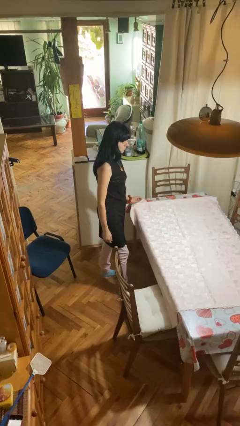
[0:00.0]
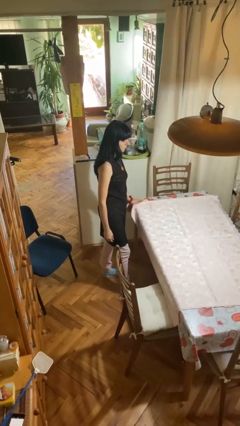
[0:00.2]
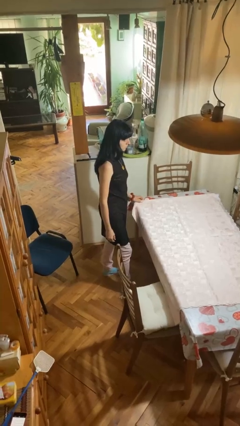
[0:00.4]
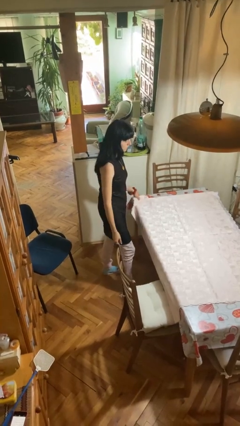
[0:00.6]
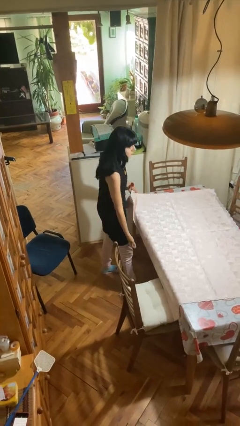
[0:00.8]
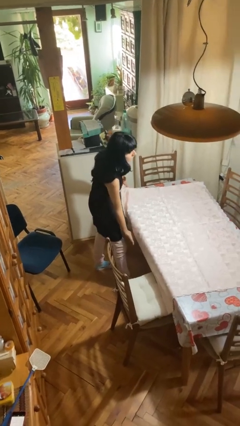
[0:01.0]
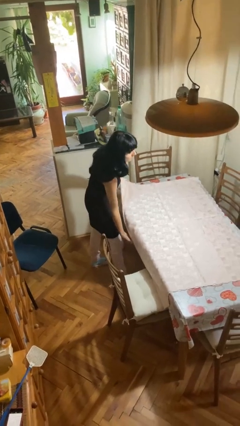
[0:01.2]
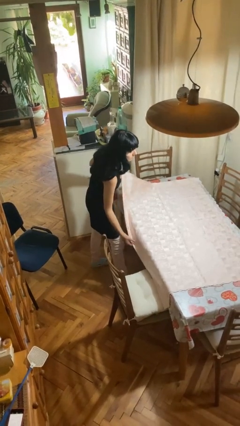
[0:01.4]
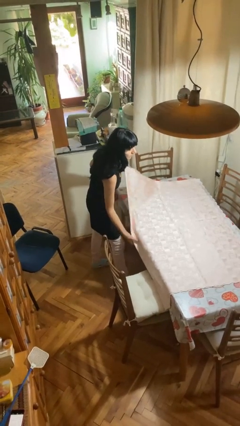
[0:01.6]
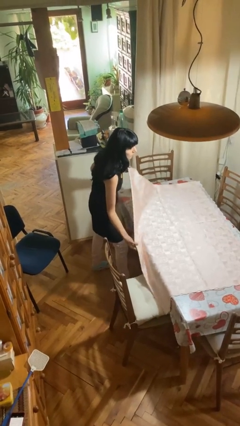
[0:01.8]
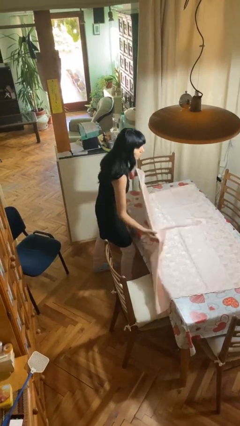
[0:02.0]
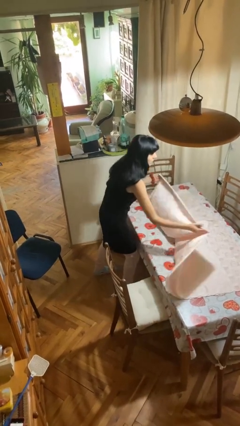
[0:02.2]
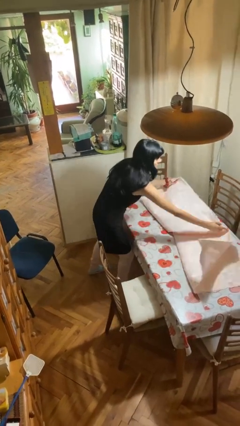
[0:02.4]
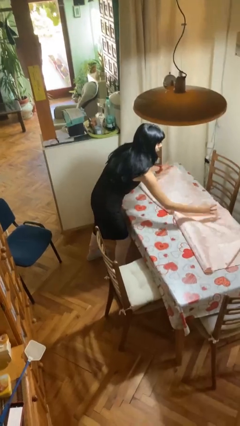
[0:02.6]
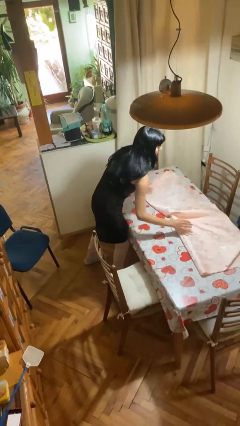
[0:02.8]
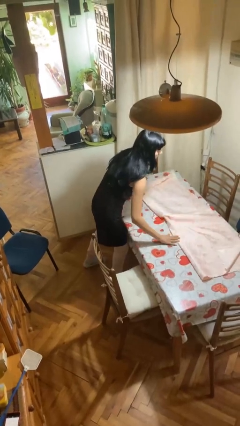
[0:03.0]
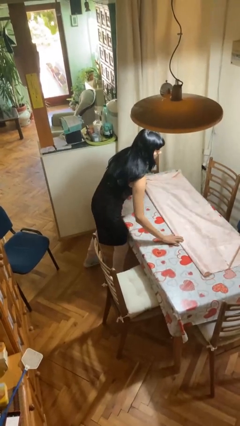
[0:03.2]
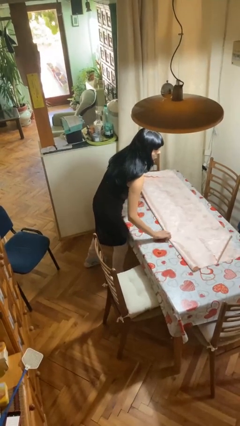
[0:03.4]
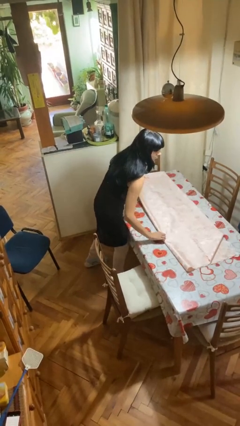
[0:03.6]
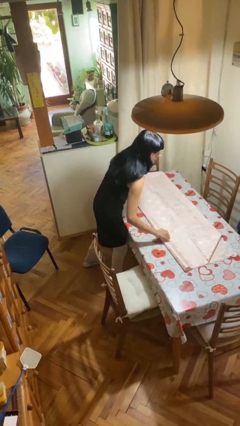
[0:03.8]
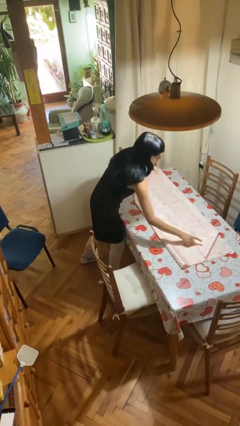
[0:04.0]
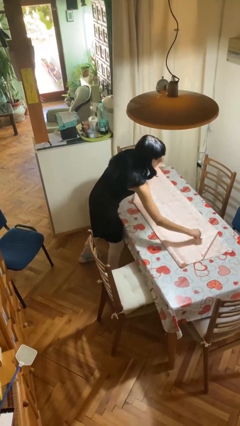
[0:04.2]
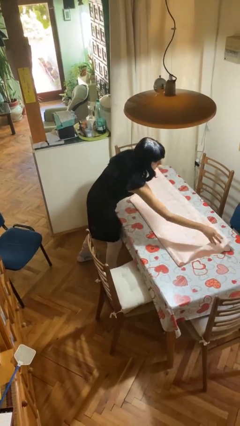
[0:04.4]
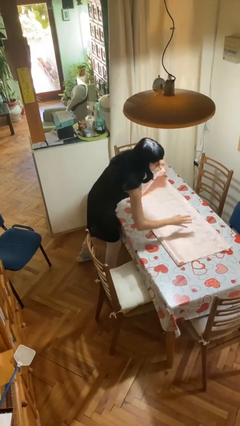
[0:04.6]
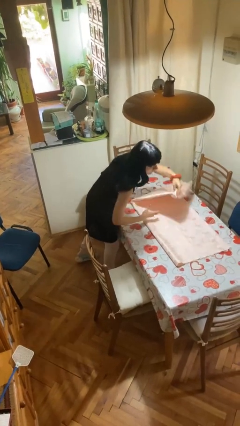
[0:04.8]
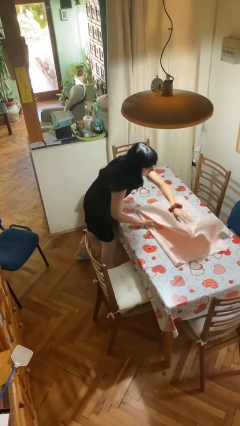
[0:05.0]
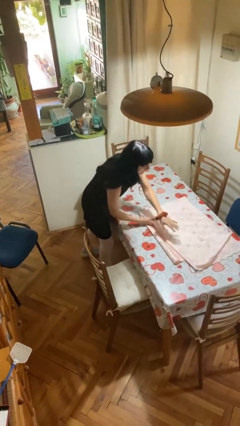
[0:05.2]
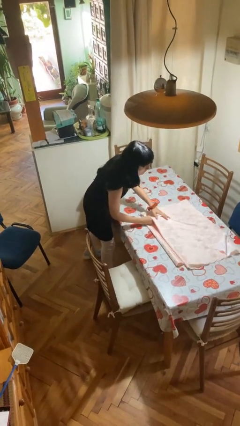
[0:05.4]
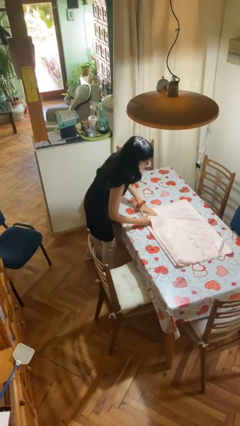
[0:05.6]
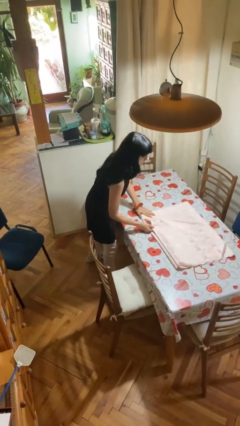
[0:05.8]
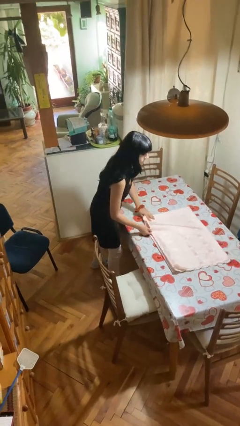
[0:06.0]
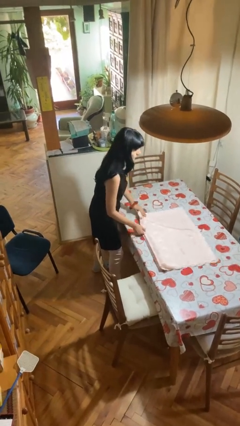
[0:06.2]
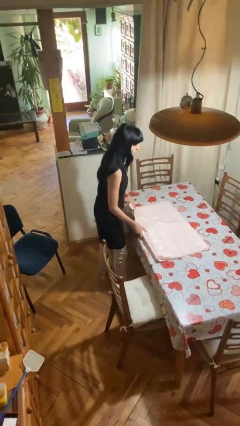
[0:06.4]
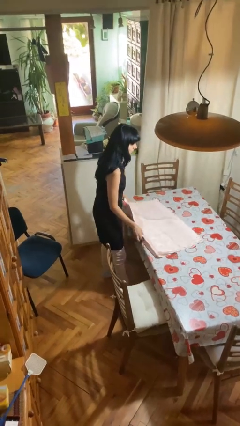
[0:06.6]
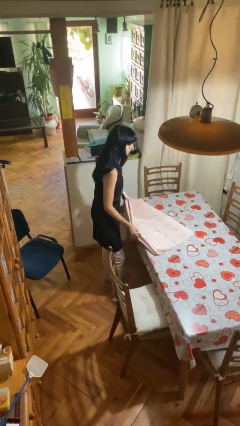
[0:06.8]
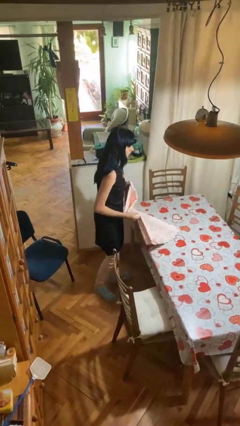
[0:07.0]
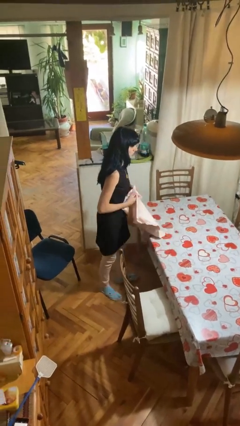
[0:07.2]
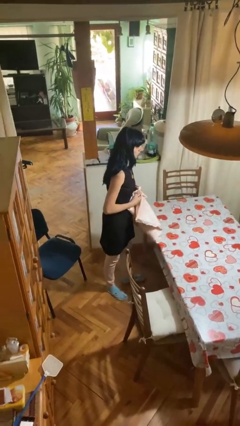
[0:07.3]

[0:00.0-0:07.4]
person folds tablecloth

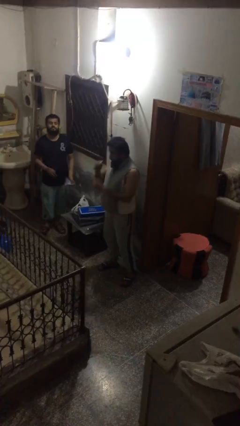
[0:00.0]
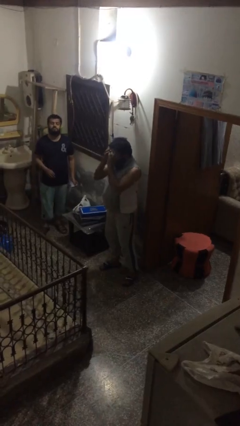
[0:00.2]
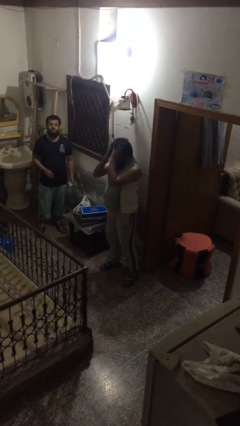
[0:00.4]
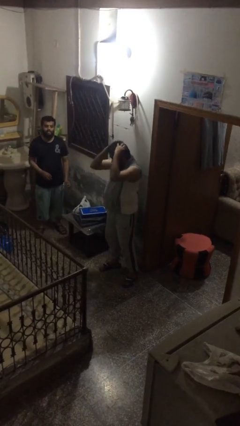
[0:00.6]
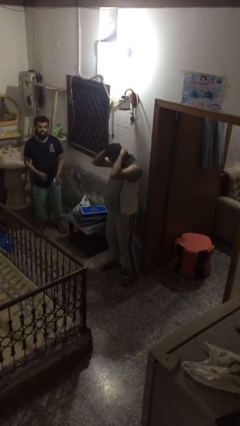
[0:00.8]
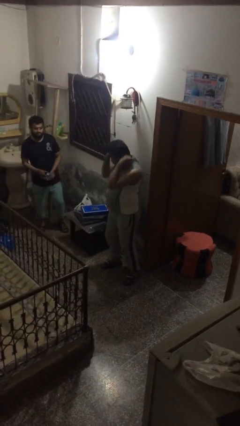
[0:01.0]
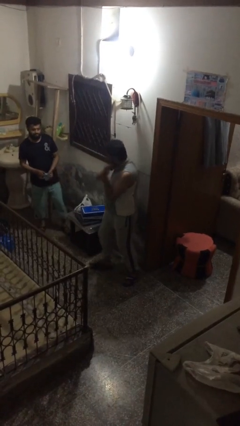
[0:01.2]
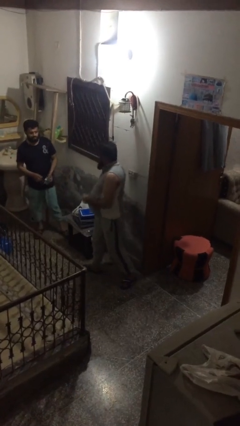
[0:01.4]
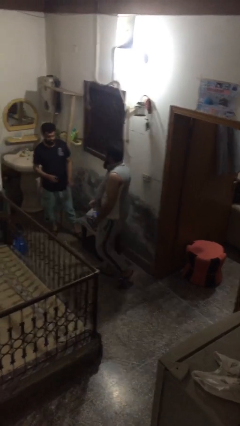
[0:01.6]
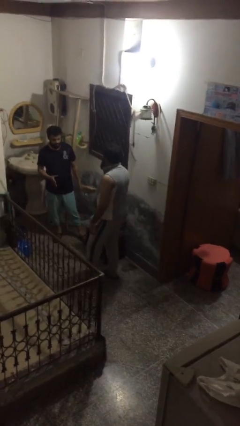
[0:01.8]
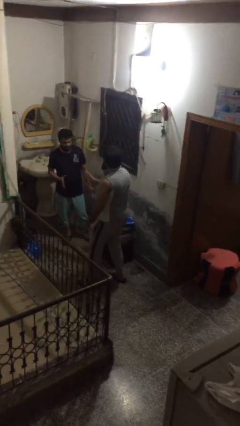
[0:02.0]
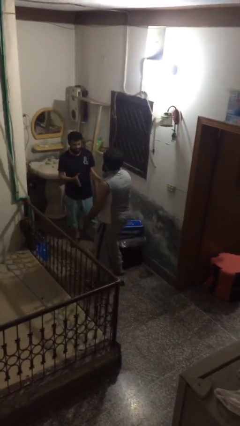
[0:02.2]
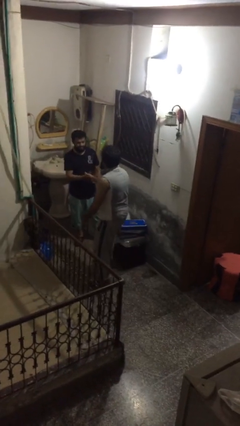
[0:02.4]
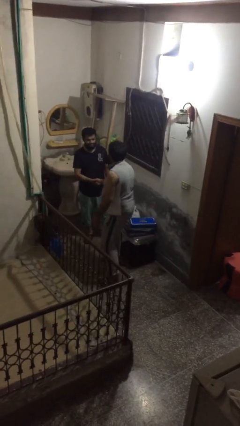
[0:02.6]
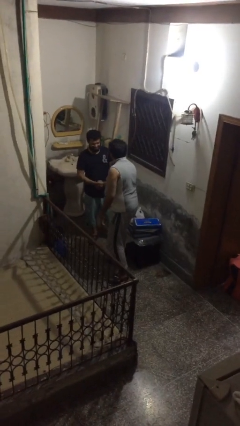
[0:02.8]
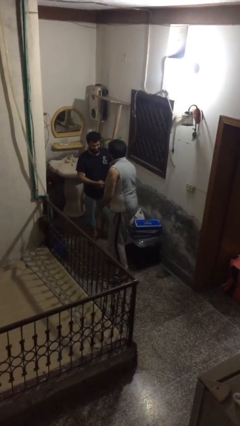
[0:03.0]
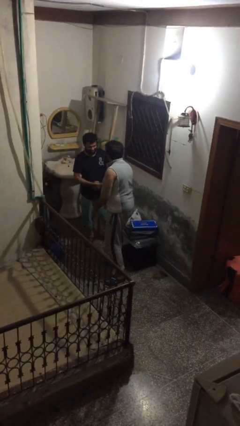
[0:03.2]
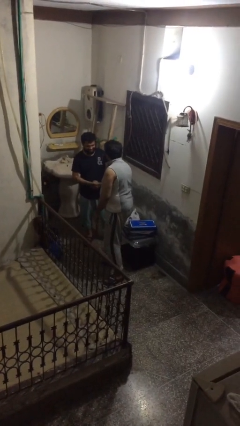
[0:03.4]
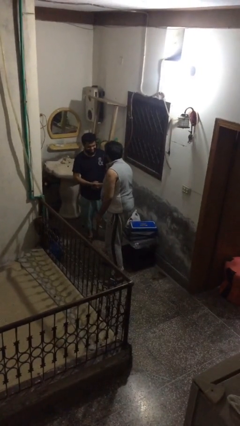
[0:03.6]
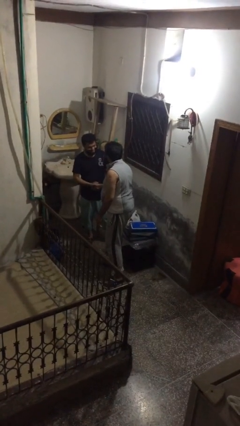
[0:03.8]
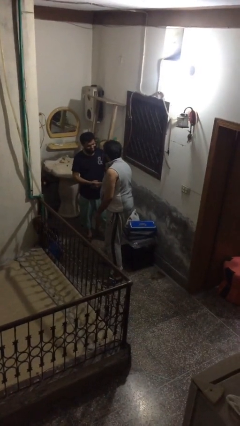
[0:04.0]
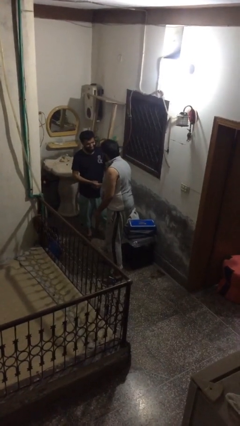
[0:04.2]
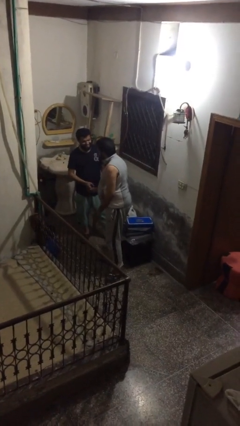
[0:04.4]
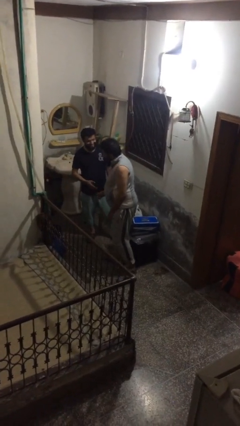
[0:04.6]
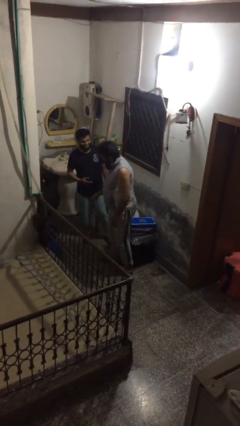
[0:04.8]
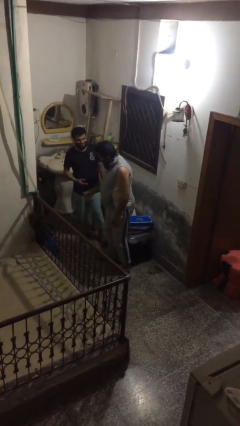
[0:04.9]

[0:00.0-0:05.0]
person shakes hand

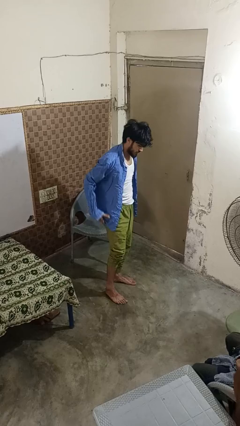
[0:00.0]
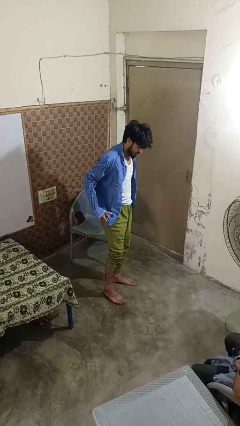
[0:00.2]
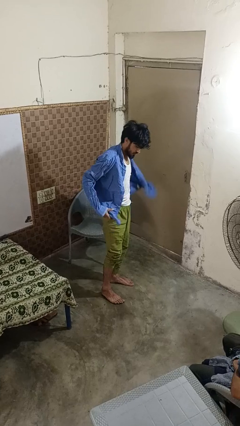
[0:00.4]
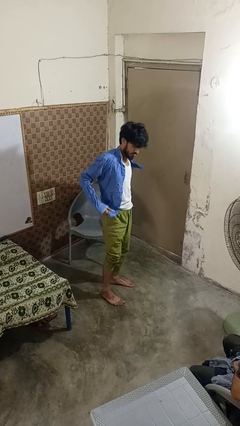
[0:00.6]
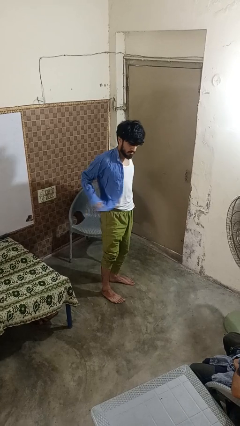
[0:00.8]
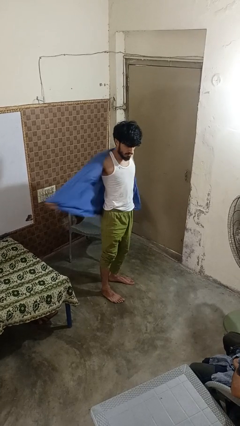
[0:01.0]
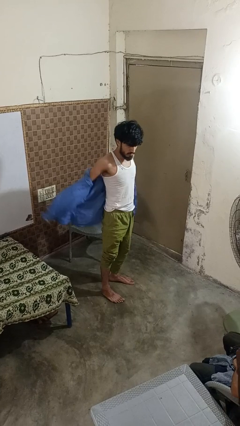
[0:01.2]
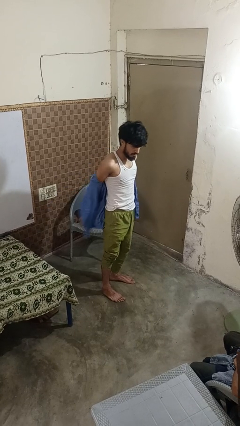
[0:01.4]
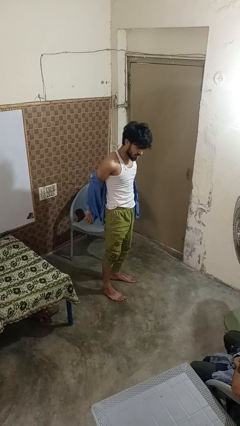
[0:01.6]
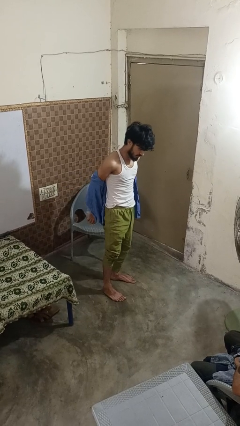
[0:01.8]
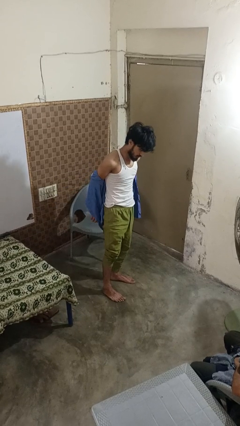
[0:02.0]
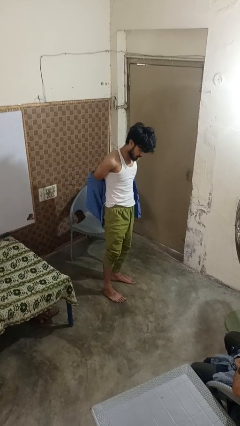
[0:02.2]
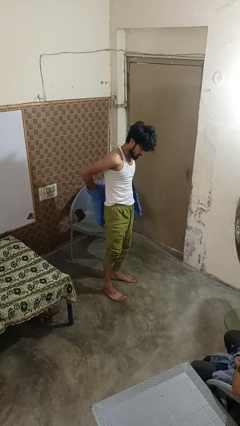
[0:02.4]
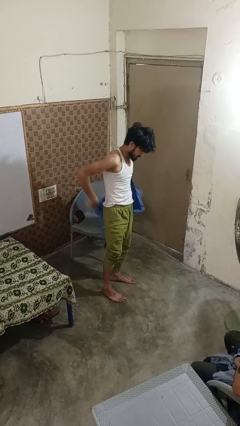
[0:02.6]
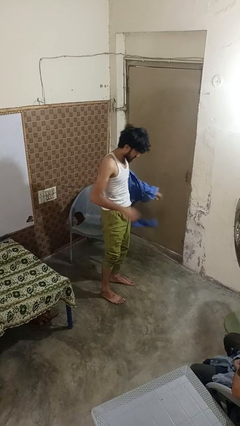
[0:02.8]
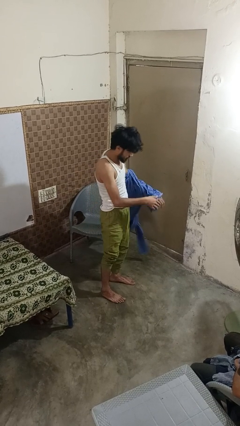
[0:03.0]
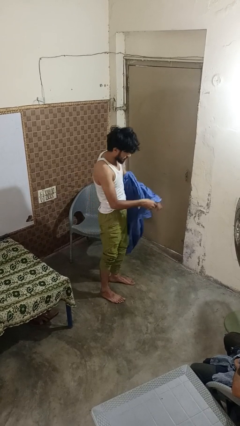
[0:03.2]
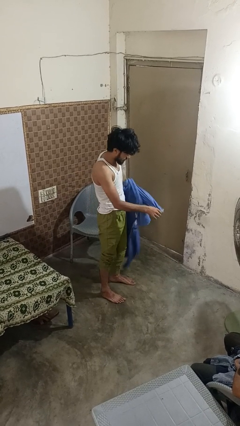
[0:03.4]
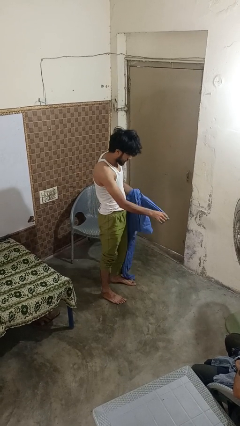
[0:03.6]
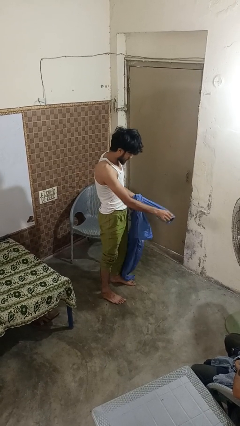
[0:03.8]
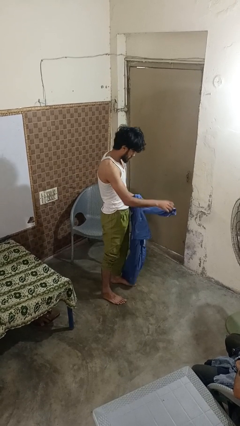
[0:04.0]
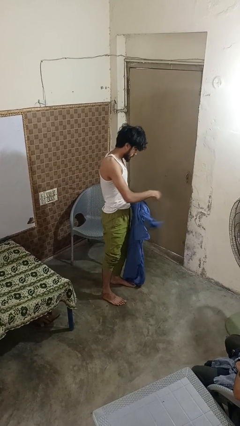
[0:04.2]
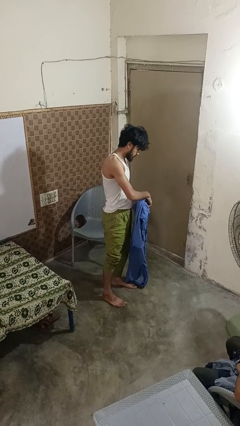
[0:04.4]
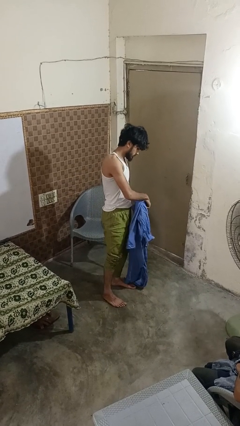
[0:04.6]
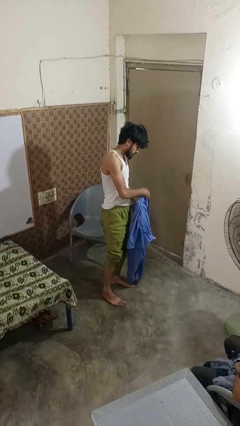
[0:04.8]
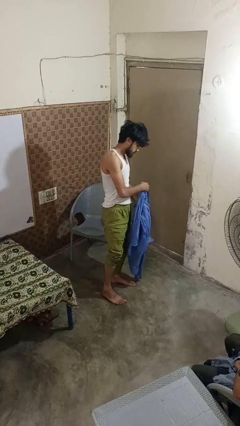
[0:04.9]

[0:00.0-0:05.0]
person takes off shirt

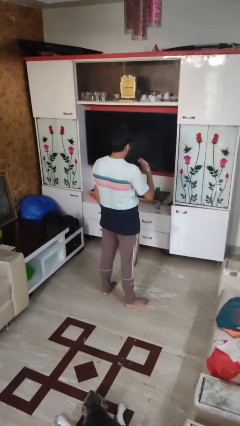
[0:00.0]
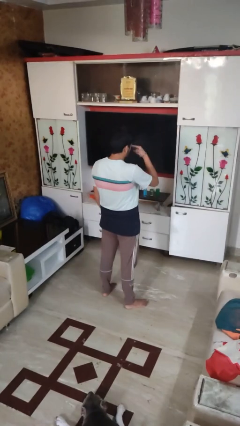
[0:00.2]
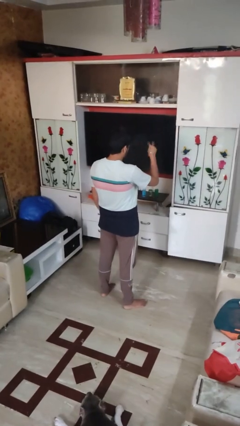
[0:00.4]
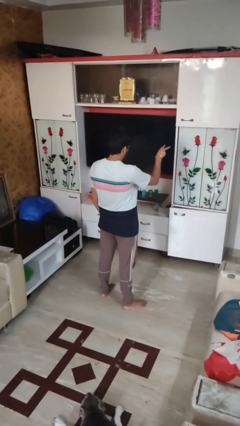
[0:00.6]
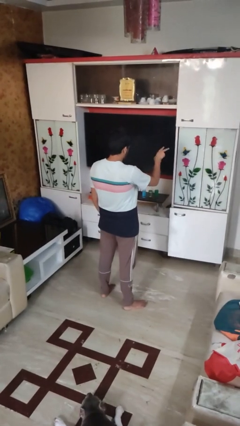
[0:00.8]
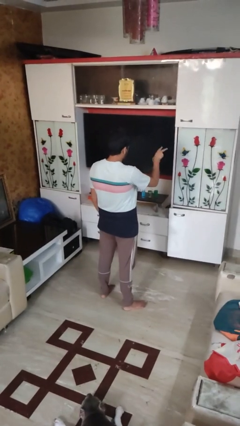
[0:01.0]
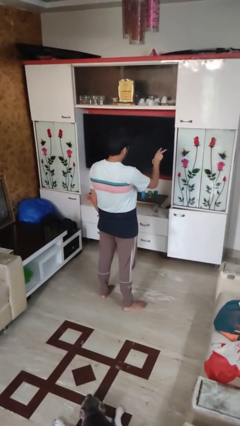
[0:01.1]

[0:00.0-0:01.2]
person gestures watch closely
